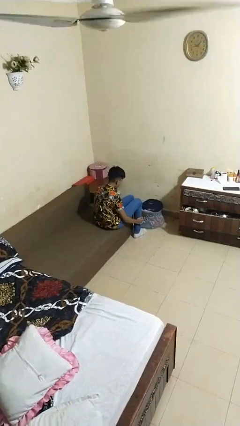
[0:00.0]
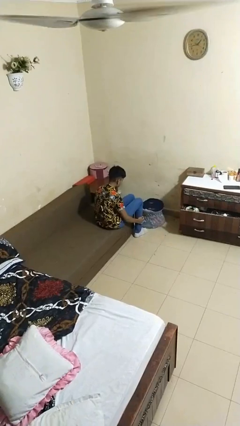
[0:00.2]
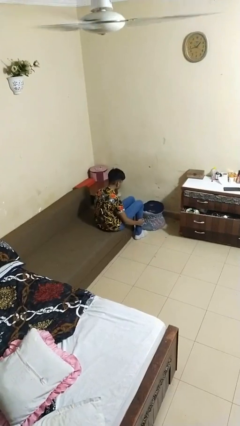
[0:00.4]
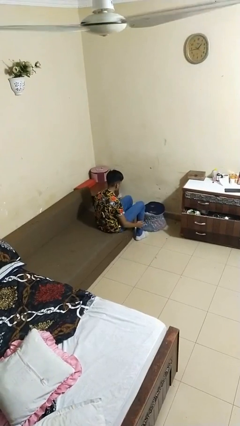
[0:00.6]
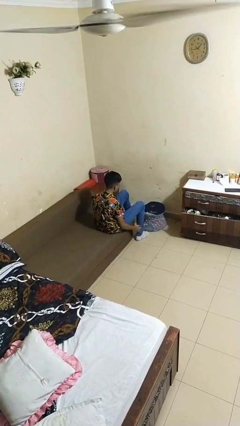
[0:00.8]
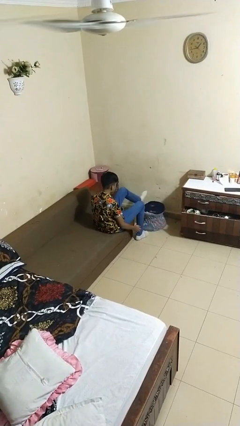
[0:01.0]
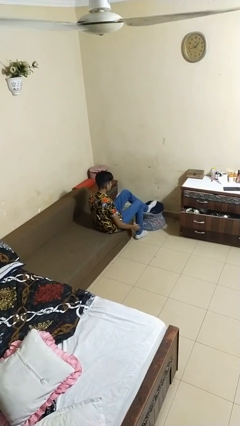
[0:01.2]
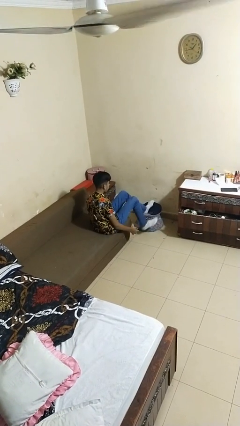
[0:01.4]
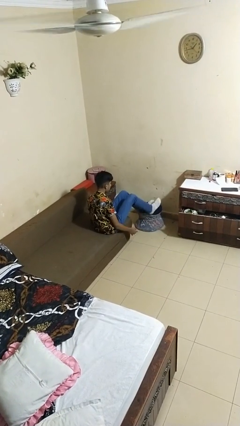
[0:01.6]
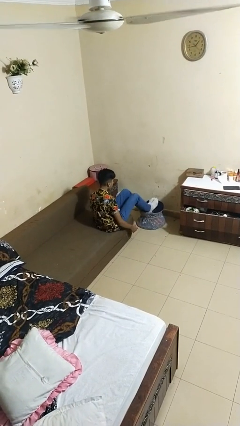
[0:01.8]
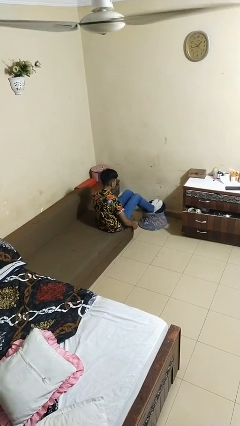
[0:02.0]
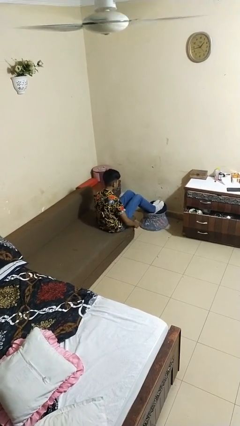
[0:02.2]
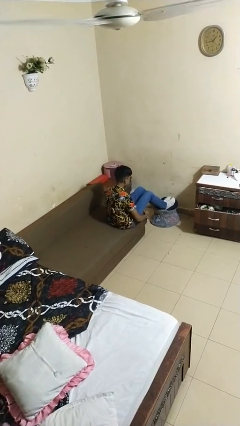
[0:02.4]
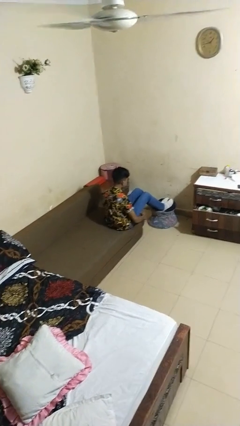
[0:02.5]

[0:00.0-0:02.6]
person puts feet up

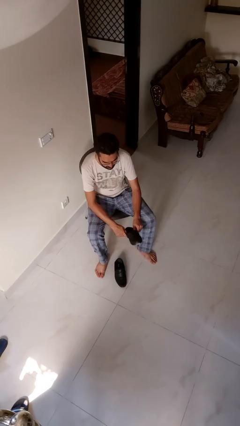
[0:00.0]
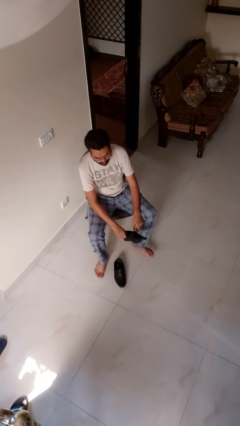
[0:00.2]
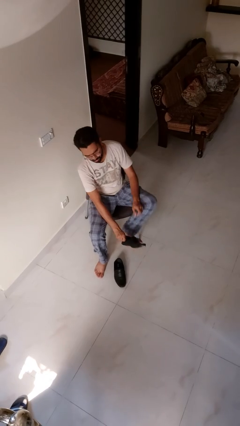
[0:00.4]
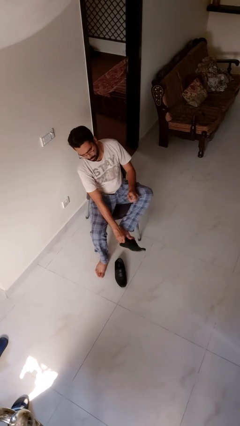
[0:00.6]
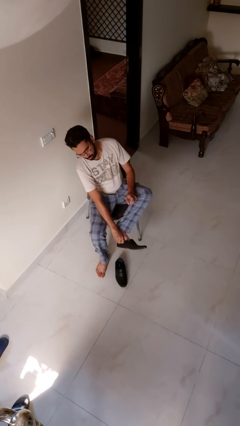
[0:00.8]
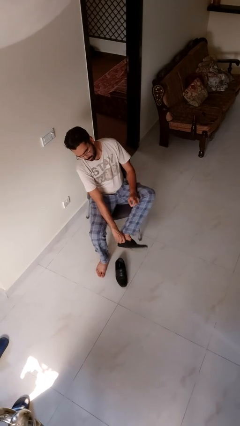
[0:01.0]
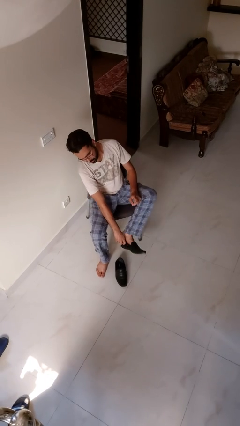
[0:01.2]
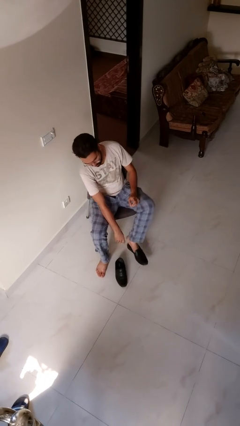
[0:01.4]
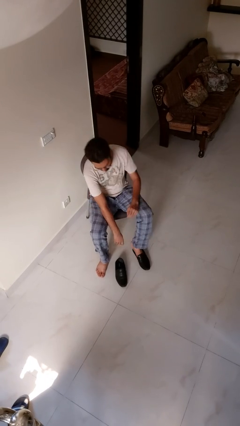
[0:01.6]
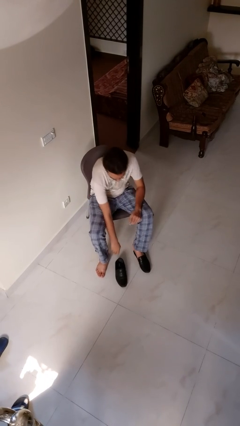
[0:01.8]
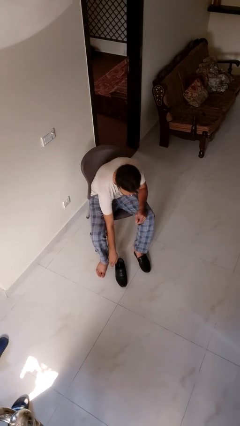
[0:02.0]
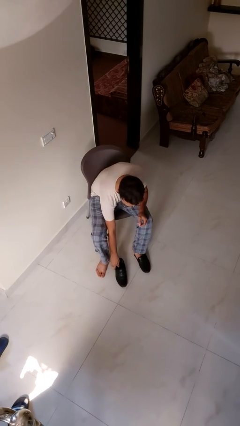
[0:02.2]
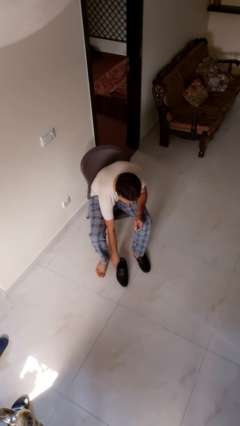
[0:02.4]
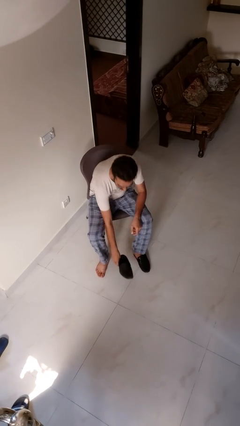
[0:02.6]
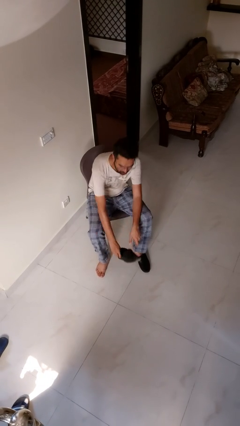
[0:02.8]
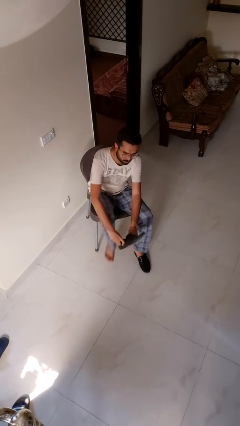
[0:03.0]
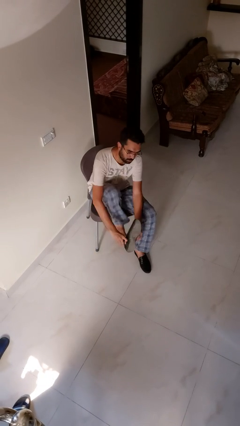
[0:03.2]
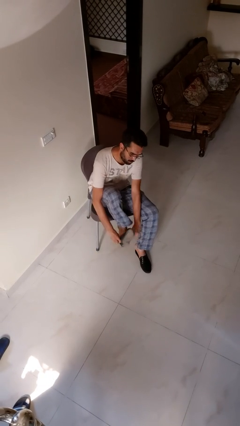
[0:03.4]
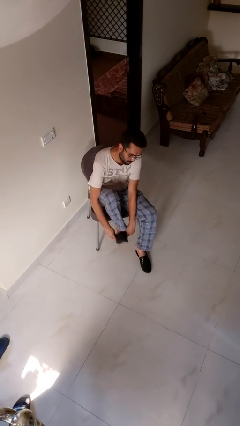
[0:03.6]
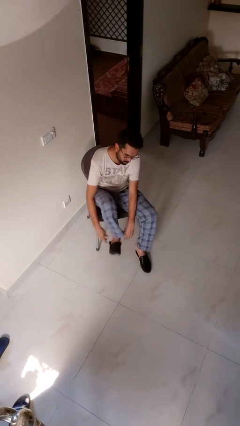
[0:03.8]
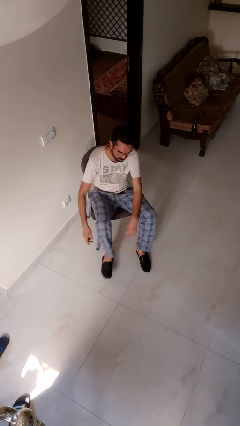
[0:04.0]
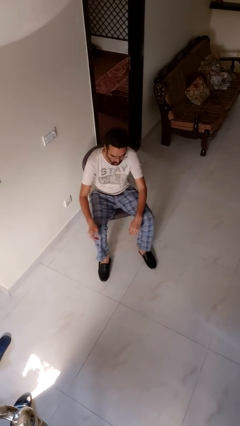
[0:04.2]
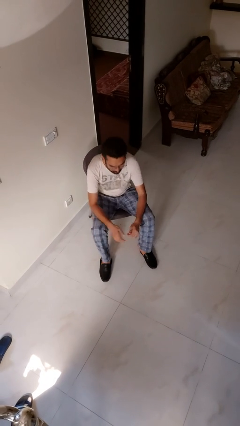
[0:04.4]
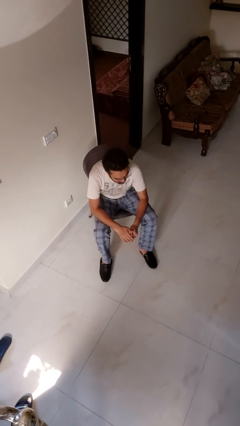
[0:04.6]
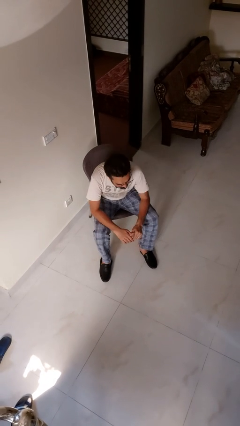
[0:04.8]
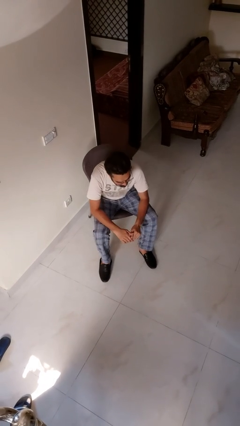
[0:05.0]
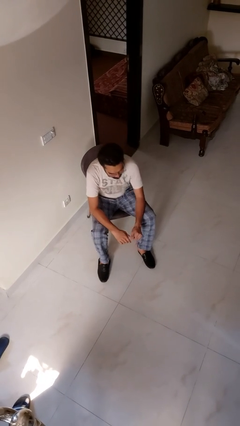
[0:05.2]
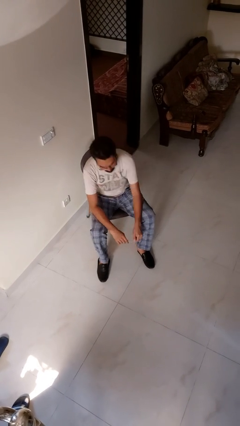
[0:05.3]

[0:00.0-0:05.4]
person puts on boots

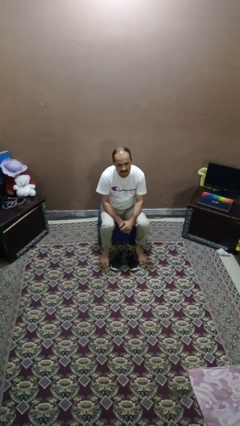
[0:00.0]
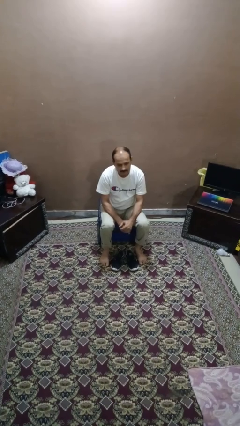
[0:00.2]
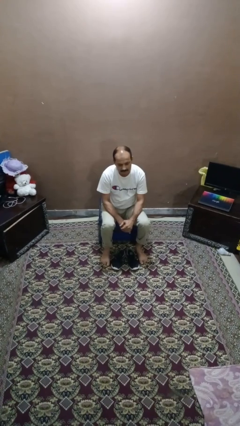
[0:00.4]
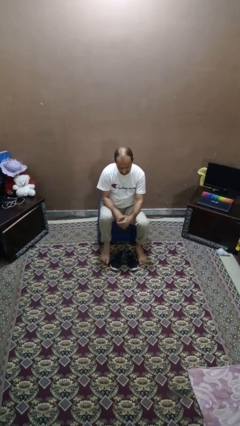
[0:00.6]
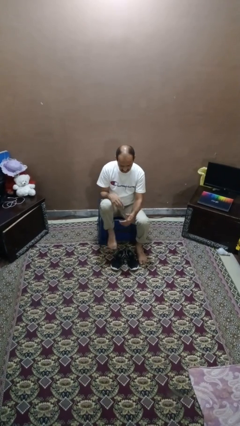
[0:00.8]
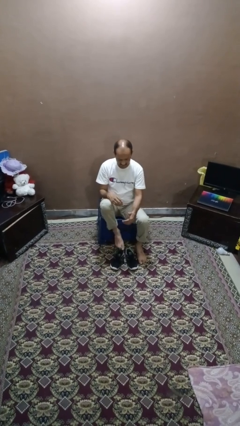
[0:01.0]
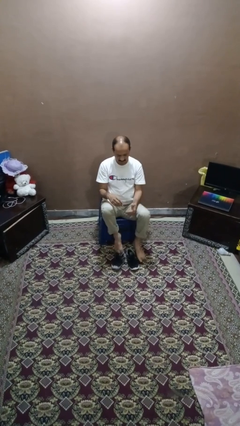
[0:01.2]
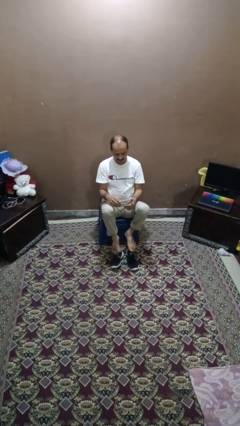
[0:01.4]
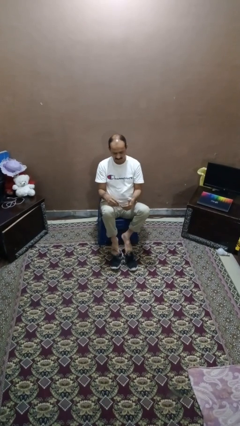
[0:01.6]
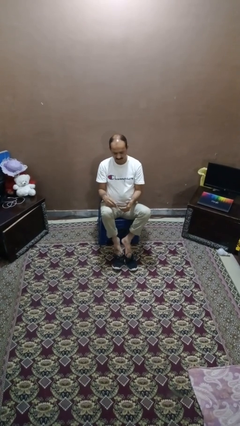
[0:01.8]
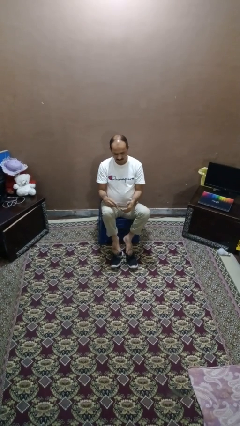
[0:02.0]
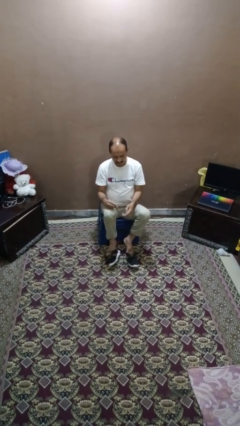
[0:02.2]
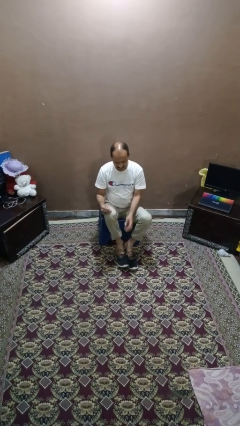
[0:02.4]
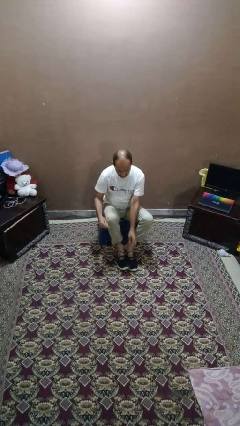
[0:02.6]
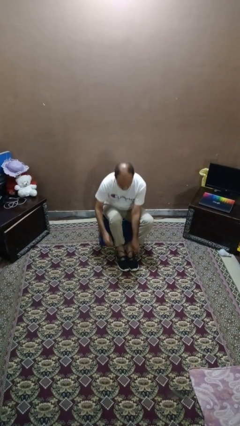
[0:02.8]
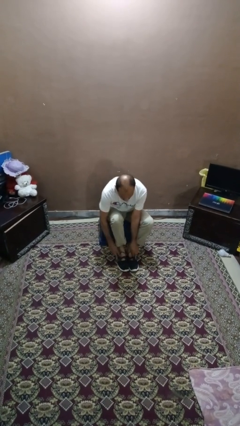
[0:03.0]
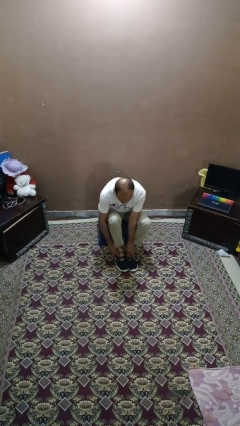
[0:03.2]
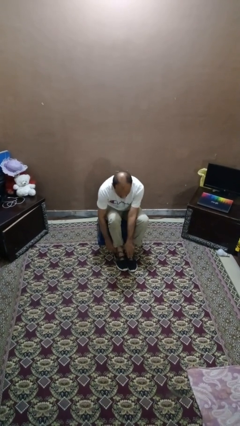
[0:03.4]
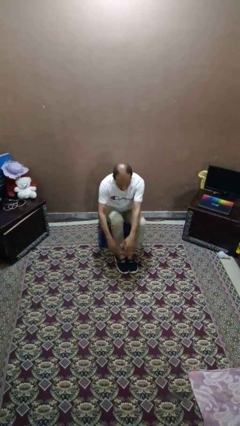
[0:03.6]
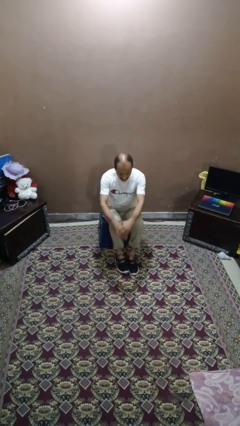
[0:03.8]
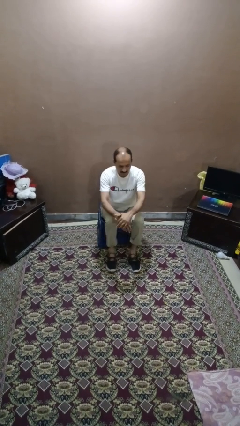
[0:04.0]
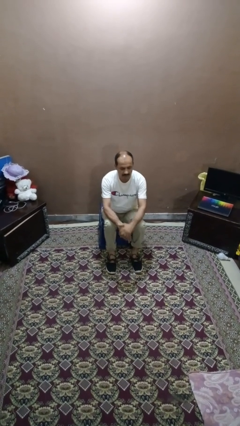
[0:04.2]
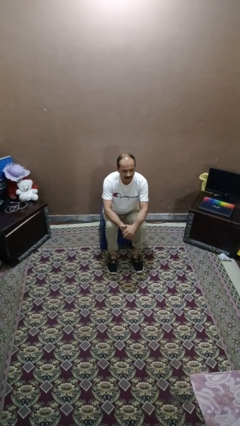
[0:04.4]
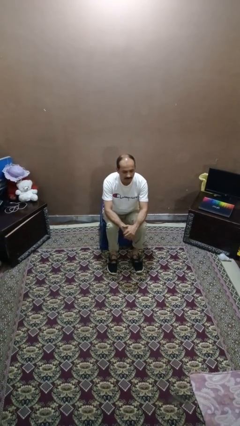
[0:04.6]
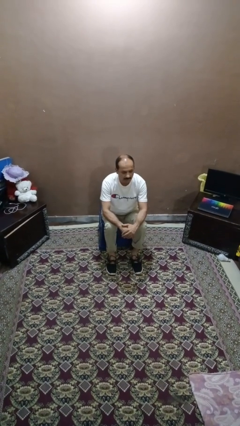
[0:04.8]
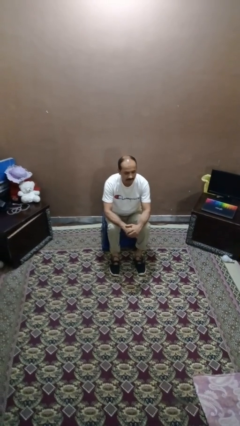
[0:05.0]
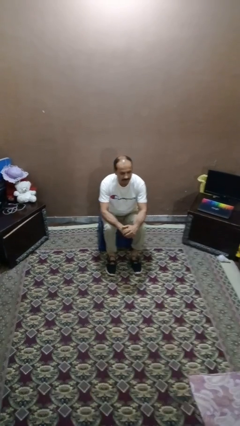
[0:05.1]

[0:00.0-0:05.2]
person puts on shoes

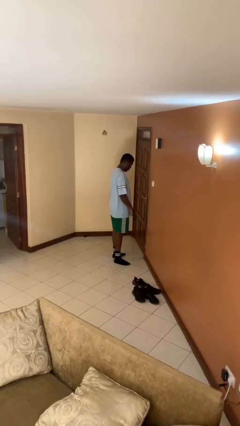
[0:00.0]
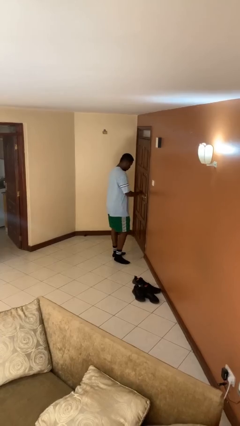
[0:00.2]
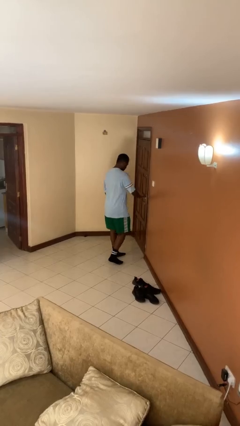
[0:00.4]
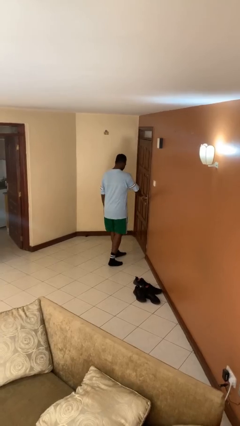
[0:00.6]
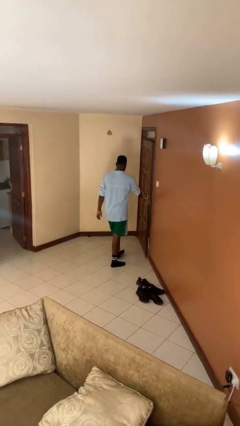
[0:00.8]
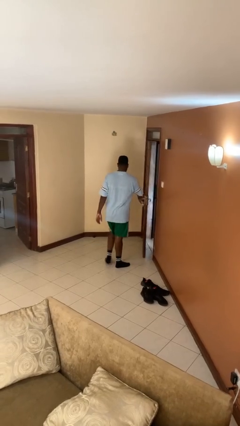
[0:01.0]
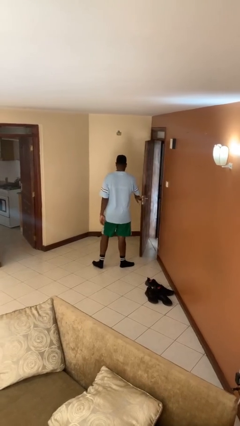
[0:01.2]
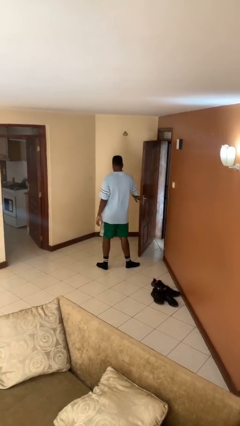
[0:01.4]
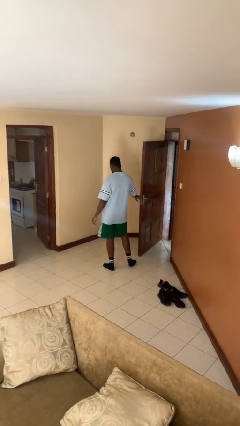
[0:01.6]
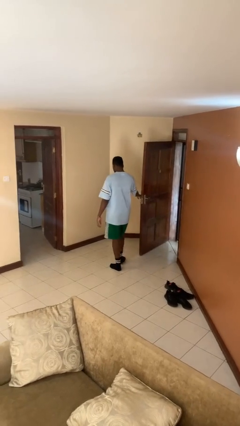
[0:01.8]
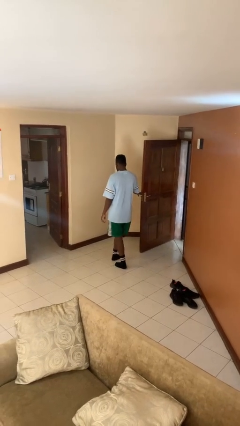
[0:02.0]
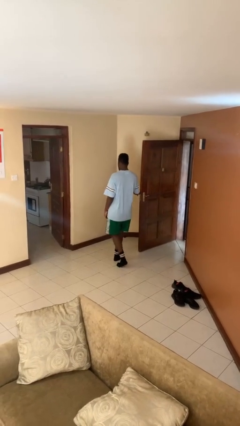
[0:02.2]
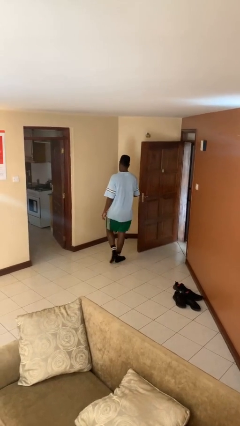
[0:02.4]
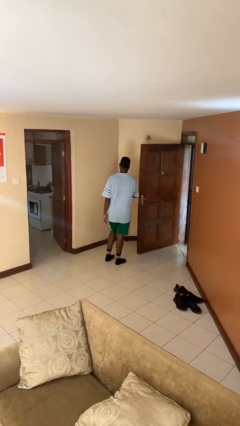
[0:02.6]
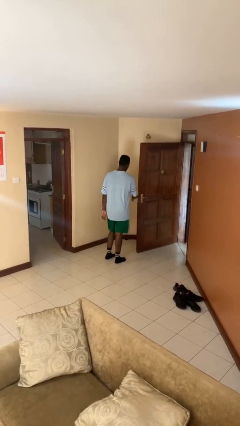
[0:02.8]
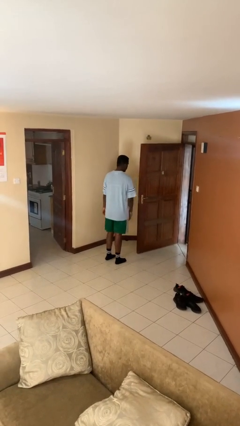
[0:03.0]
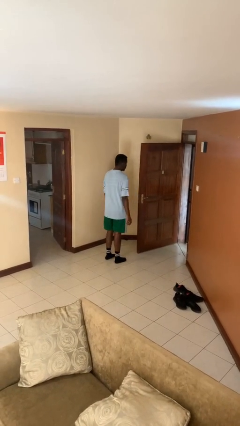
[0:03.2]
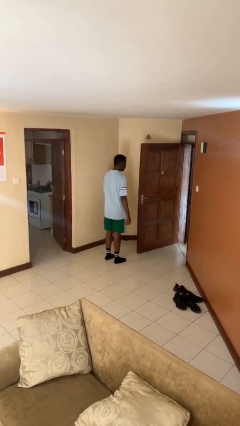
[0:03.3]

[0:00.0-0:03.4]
person opens facility door

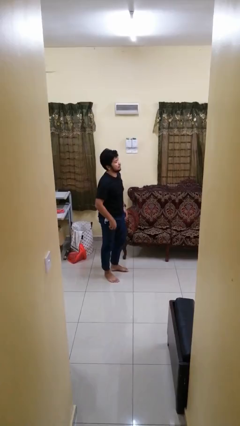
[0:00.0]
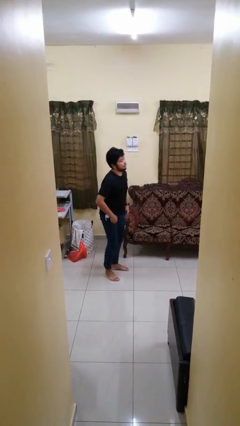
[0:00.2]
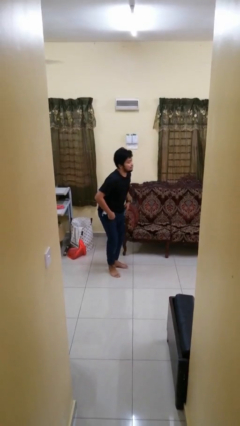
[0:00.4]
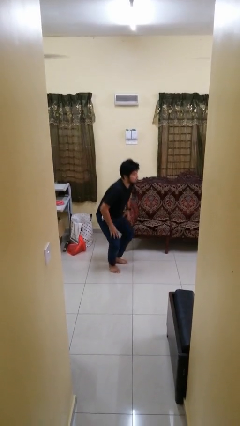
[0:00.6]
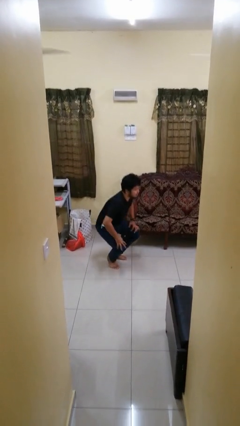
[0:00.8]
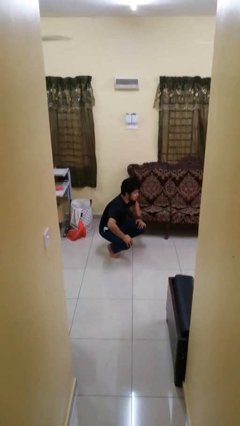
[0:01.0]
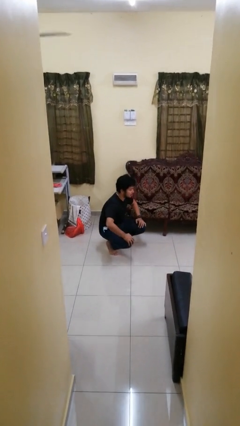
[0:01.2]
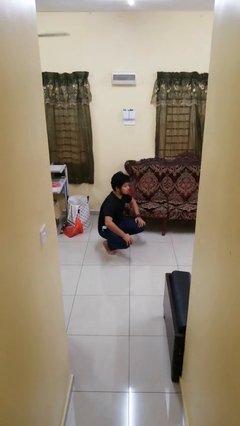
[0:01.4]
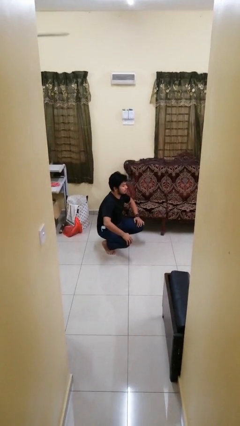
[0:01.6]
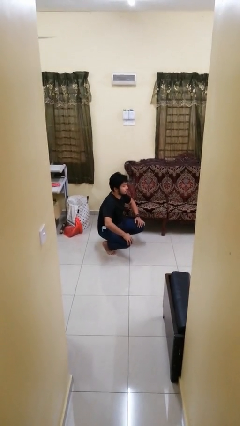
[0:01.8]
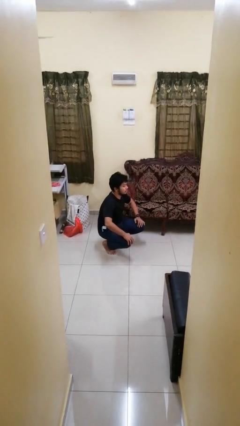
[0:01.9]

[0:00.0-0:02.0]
person squats
